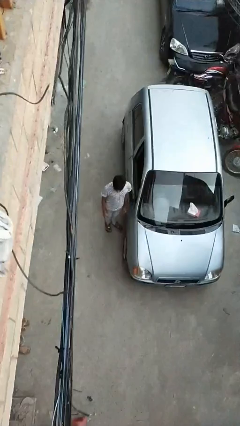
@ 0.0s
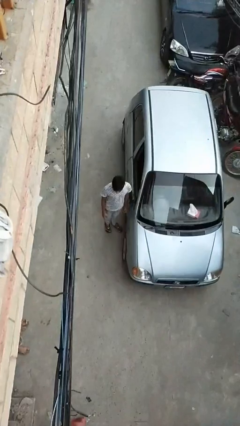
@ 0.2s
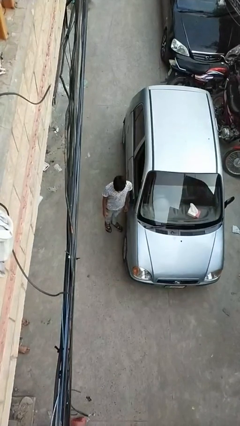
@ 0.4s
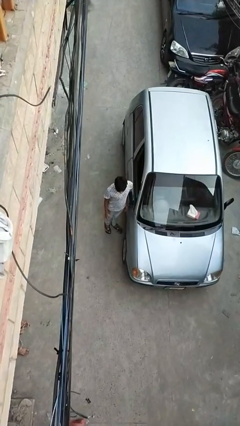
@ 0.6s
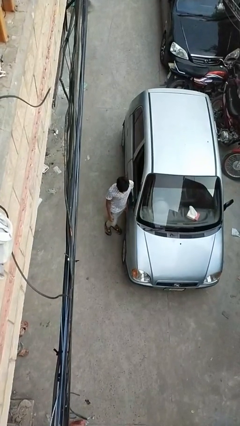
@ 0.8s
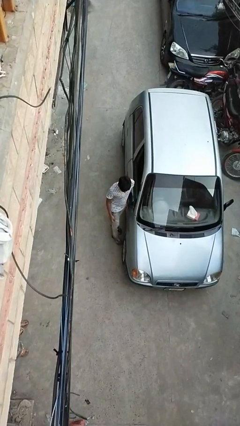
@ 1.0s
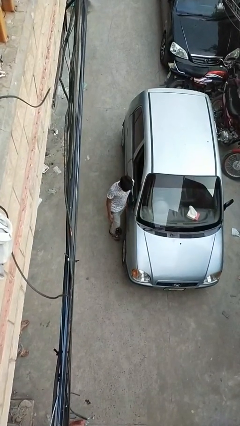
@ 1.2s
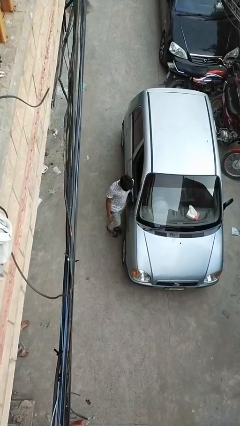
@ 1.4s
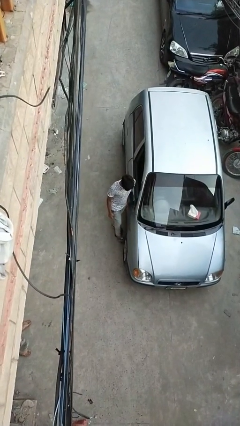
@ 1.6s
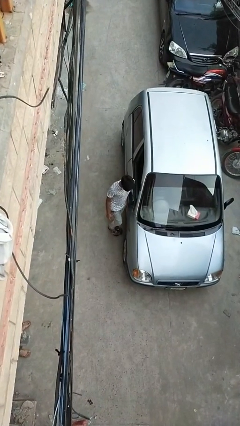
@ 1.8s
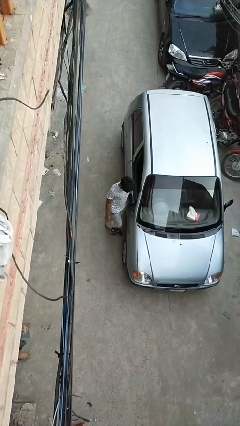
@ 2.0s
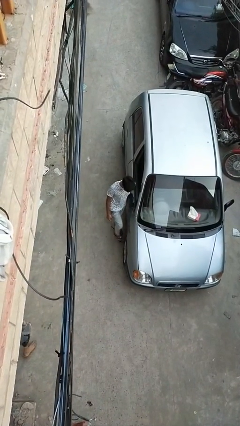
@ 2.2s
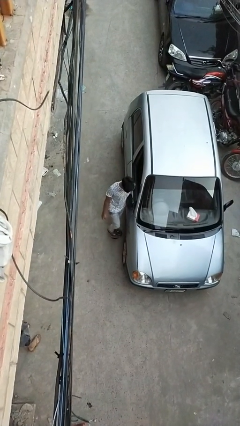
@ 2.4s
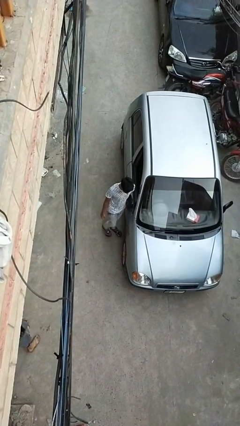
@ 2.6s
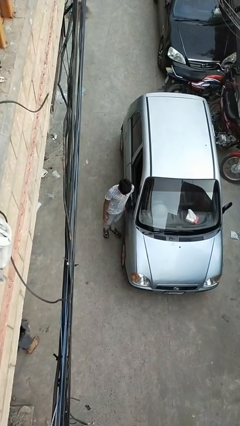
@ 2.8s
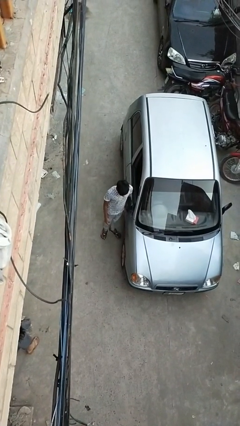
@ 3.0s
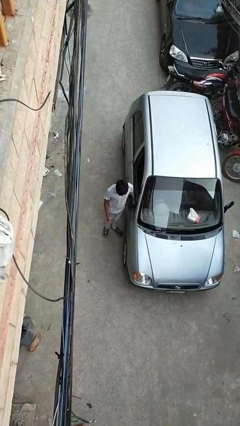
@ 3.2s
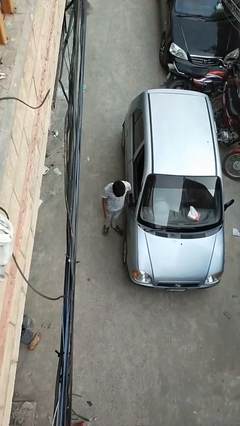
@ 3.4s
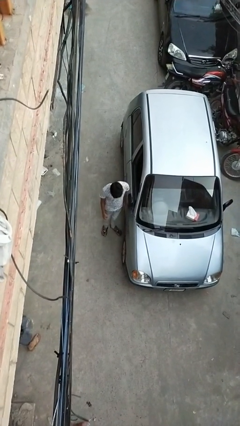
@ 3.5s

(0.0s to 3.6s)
person kicks car tires

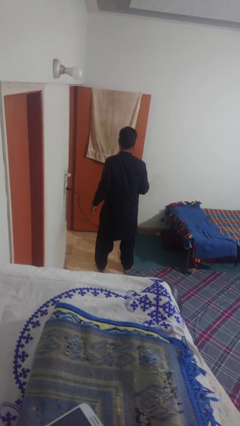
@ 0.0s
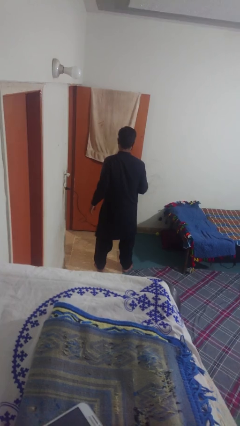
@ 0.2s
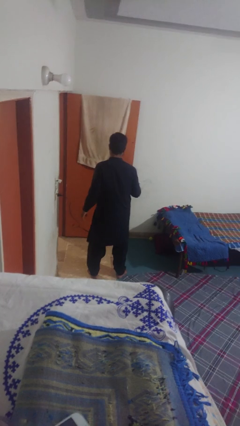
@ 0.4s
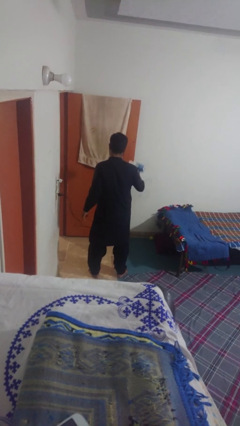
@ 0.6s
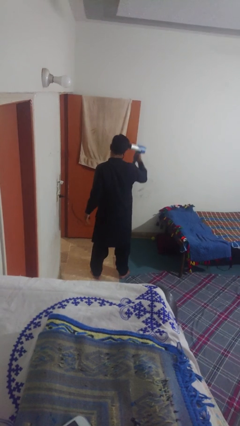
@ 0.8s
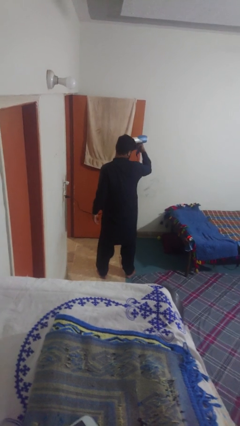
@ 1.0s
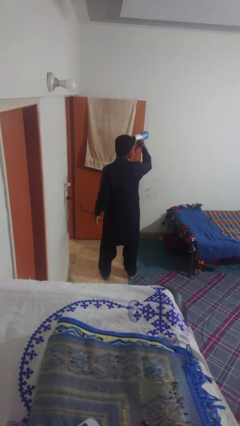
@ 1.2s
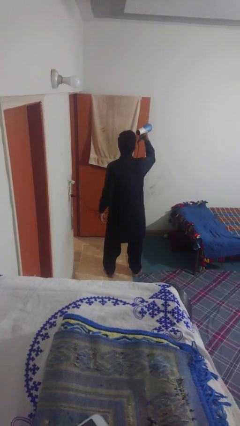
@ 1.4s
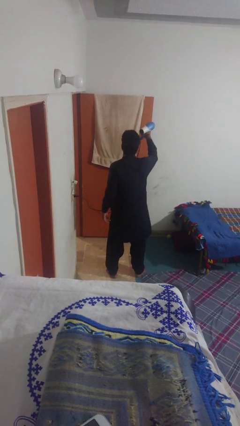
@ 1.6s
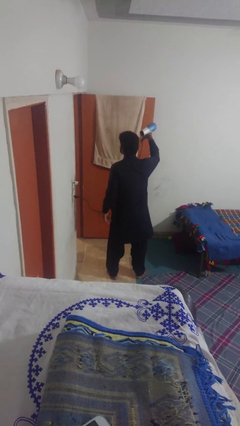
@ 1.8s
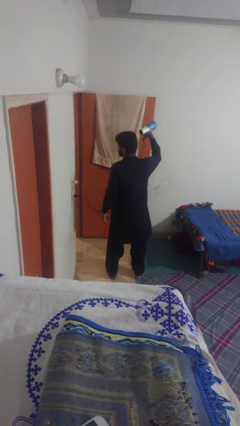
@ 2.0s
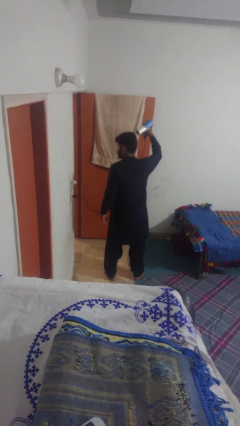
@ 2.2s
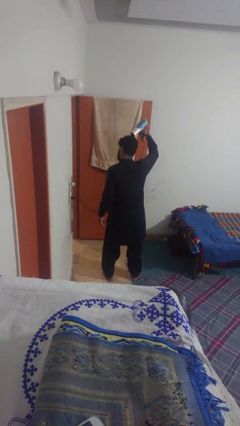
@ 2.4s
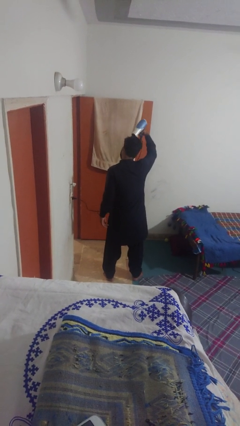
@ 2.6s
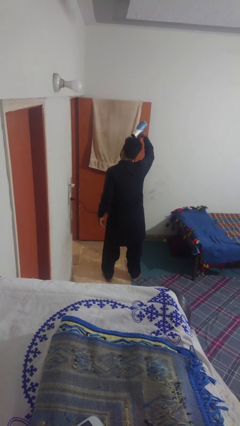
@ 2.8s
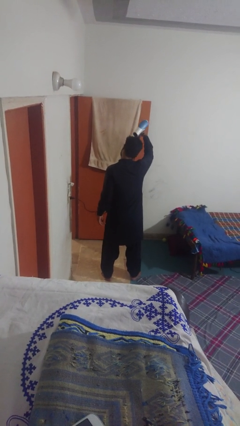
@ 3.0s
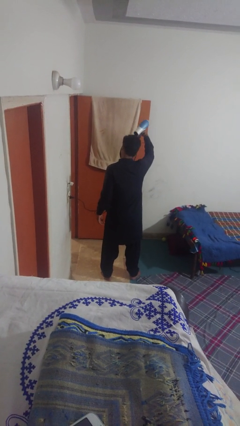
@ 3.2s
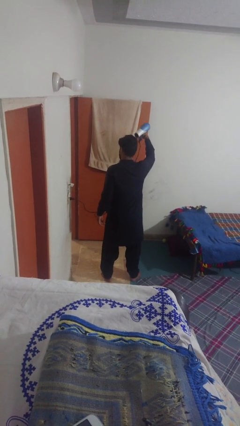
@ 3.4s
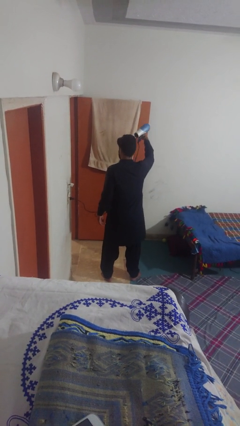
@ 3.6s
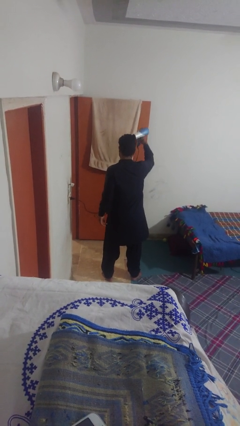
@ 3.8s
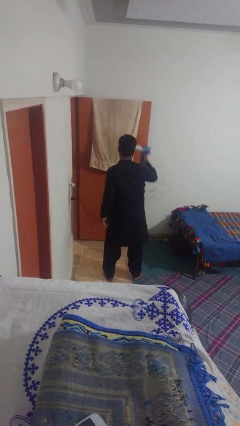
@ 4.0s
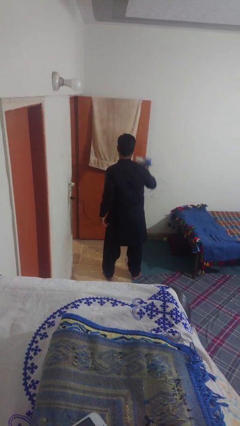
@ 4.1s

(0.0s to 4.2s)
person dries hair with hairdryer

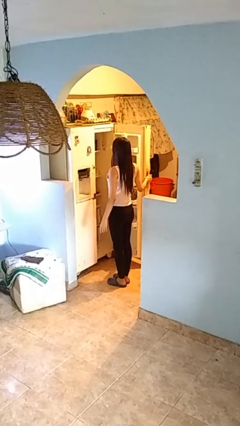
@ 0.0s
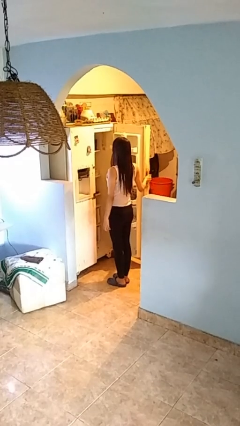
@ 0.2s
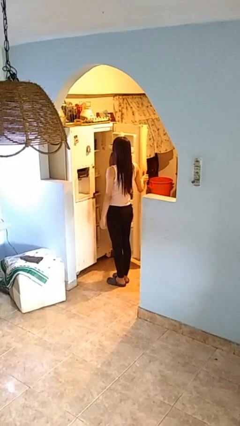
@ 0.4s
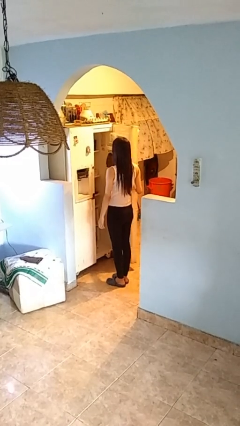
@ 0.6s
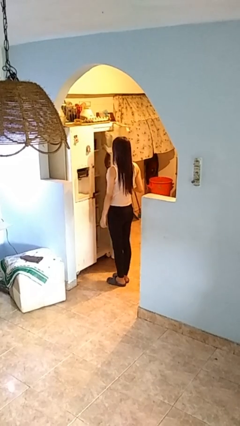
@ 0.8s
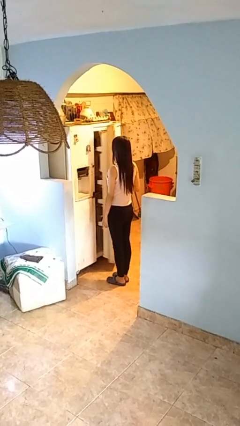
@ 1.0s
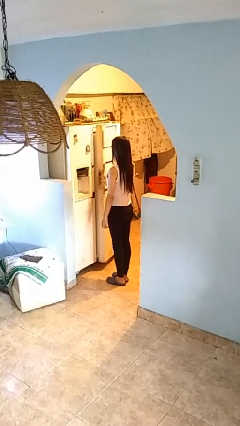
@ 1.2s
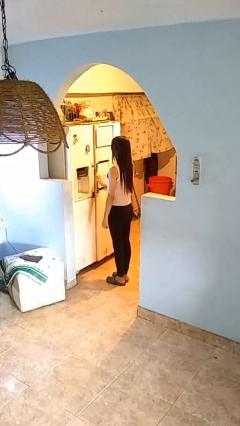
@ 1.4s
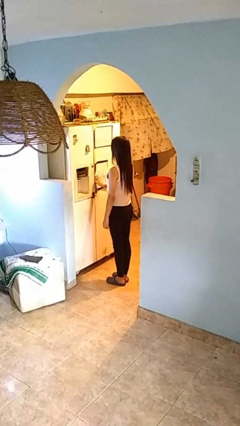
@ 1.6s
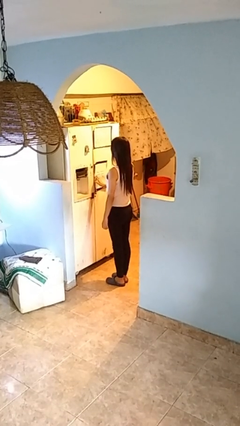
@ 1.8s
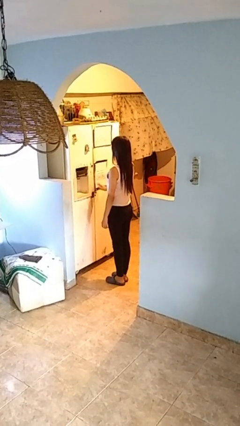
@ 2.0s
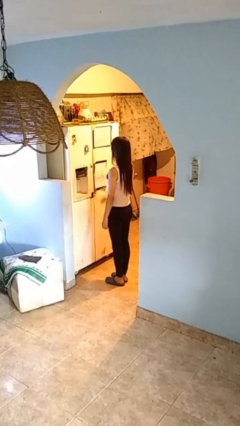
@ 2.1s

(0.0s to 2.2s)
person closes refrigerator

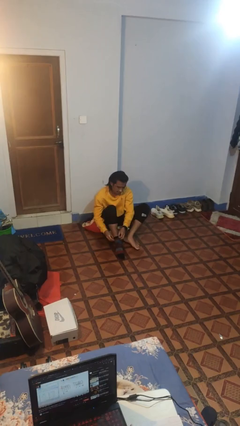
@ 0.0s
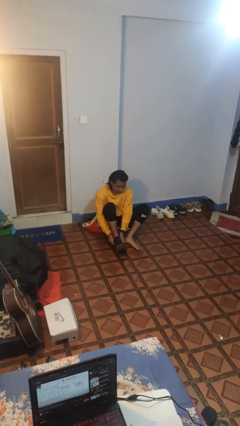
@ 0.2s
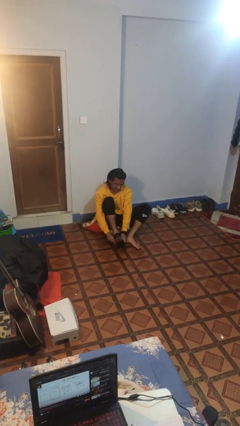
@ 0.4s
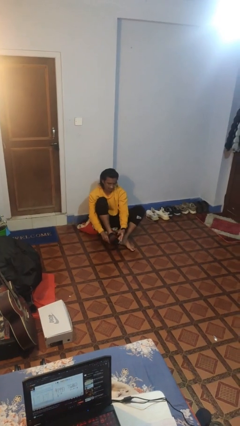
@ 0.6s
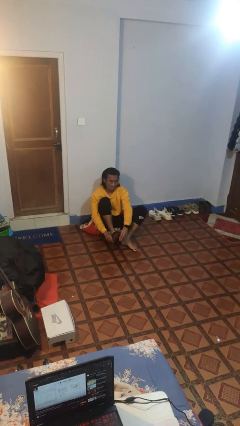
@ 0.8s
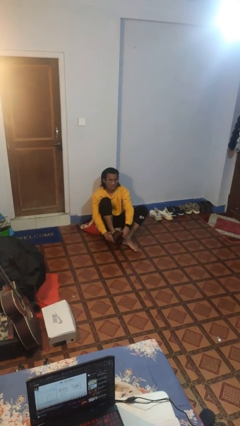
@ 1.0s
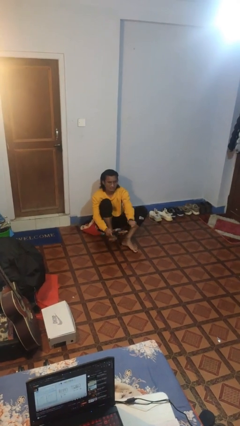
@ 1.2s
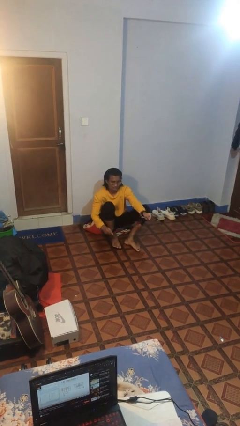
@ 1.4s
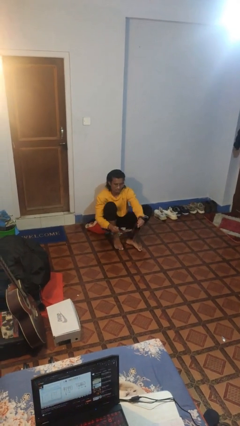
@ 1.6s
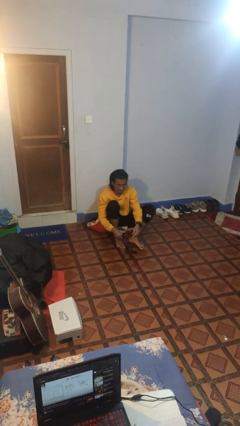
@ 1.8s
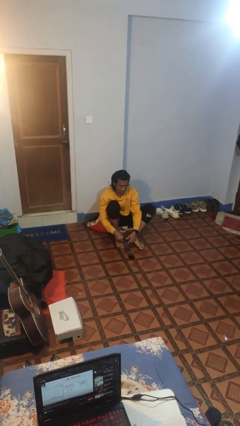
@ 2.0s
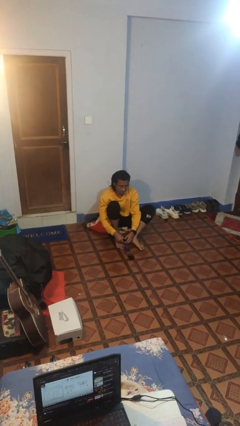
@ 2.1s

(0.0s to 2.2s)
person takes off socks

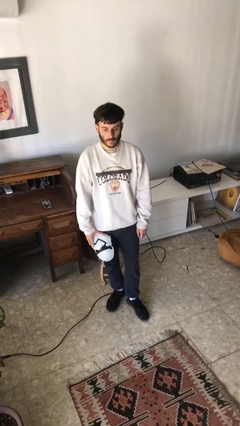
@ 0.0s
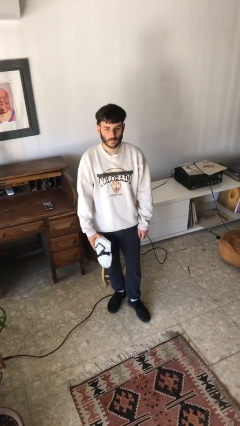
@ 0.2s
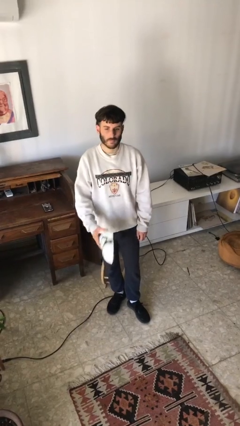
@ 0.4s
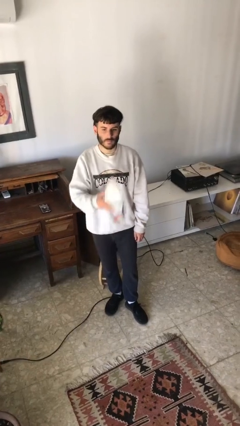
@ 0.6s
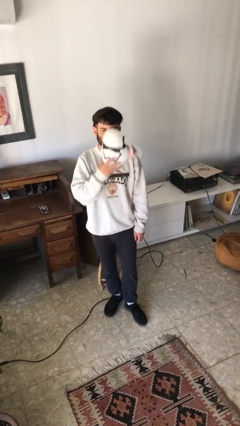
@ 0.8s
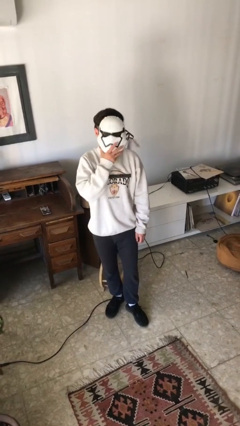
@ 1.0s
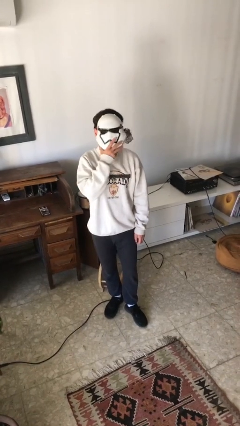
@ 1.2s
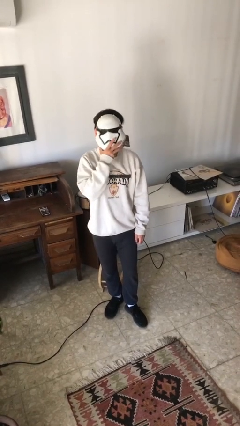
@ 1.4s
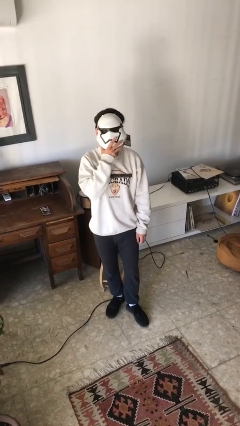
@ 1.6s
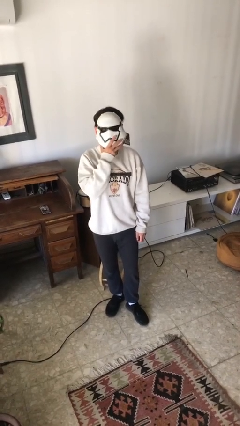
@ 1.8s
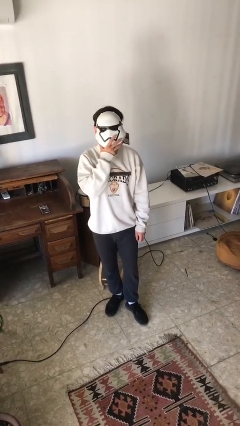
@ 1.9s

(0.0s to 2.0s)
person puts on facemask

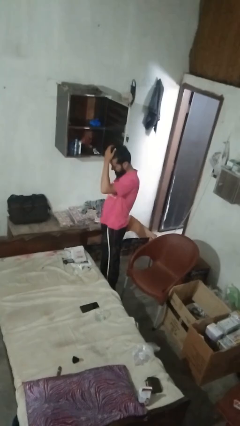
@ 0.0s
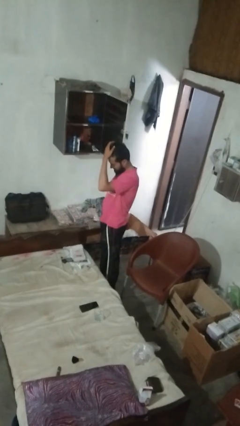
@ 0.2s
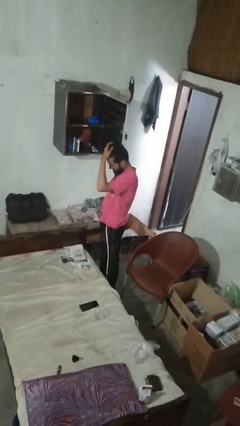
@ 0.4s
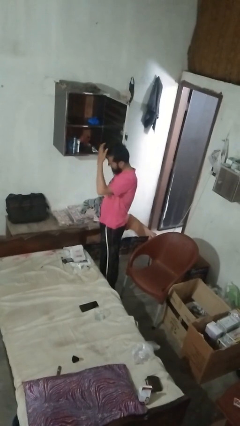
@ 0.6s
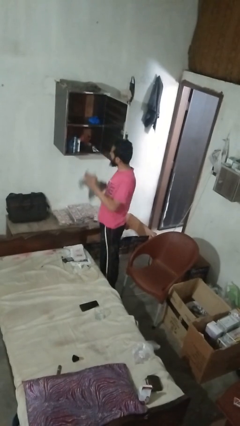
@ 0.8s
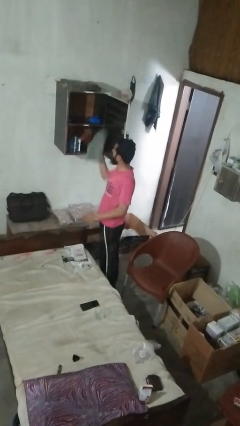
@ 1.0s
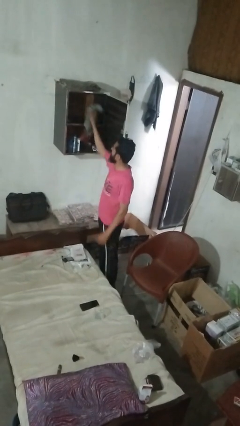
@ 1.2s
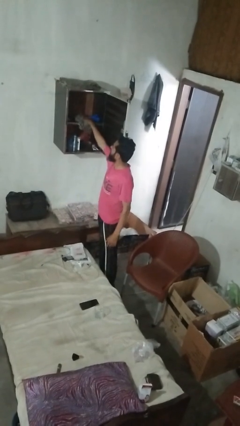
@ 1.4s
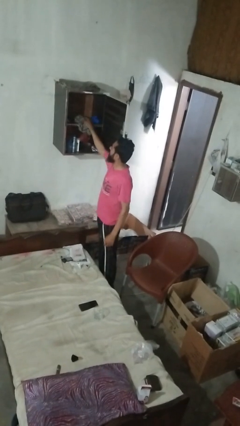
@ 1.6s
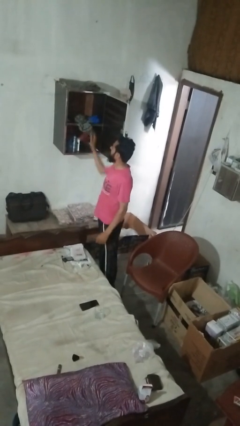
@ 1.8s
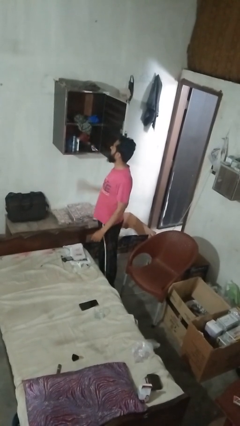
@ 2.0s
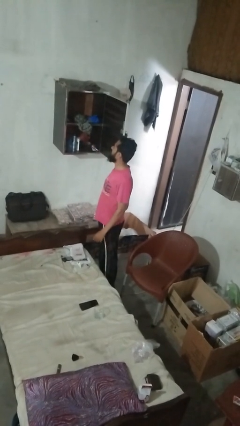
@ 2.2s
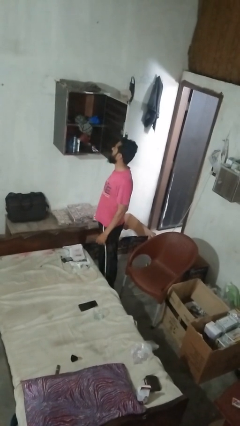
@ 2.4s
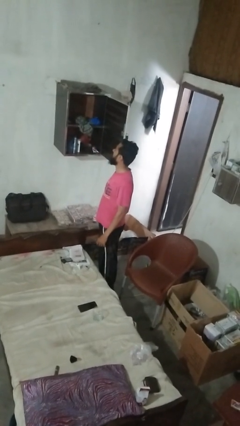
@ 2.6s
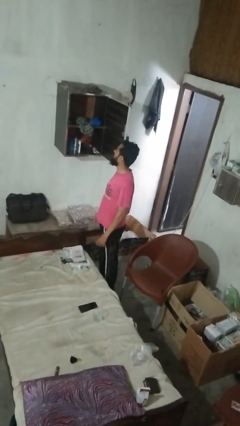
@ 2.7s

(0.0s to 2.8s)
person puts clothes into dresser

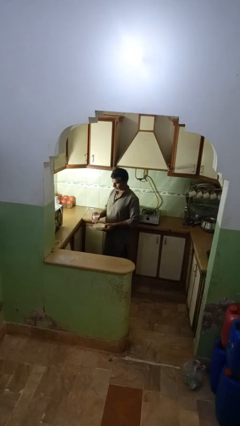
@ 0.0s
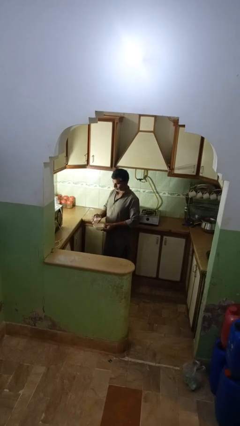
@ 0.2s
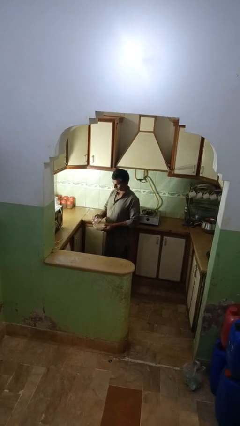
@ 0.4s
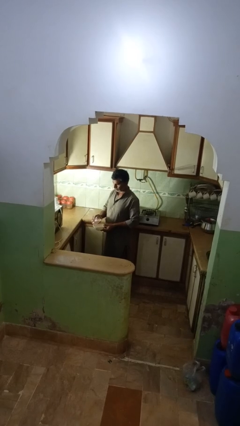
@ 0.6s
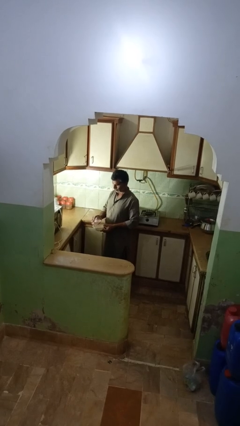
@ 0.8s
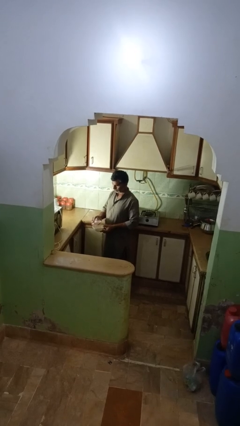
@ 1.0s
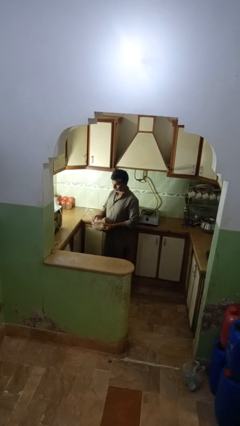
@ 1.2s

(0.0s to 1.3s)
person pours into bowl
